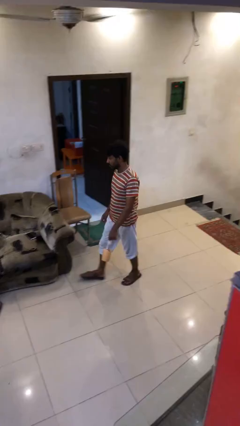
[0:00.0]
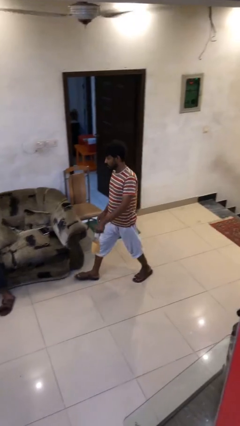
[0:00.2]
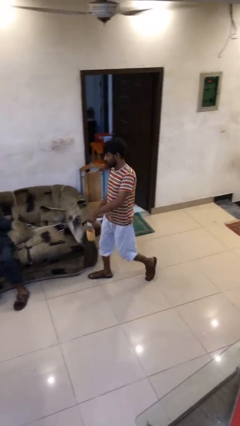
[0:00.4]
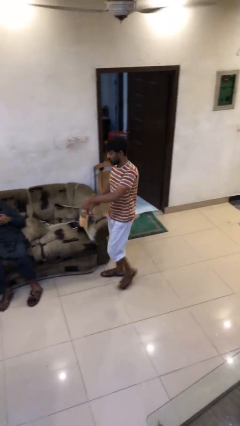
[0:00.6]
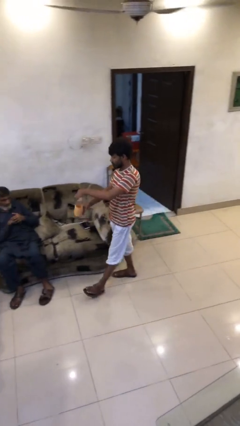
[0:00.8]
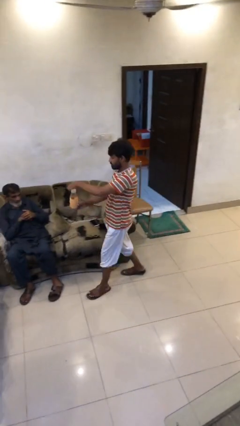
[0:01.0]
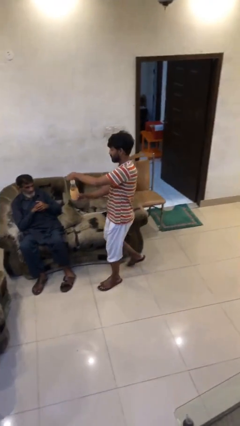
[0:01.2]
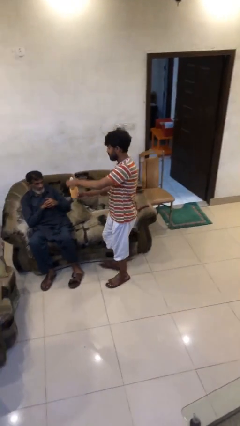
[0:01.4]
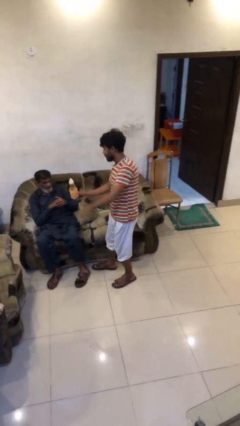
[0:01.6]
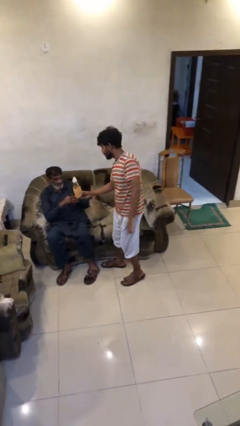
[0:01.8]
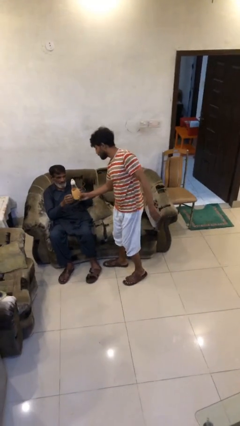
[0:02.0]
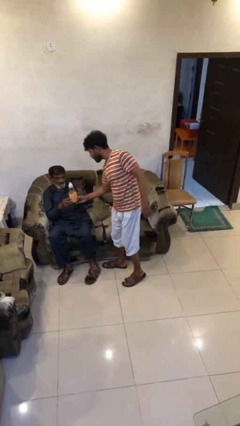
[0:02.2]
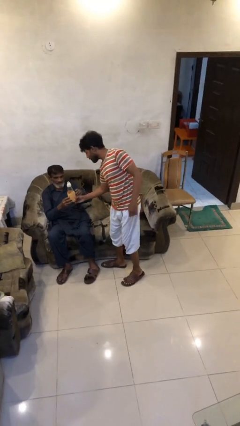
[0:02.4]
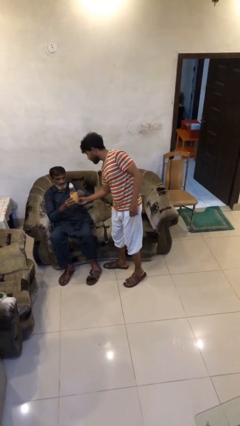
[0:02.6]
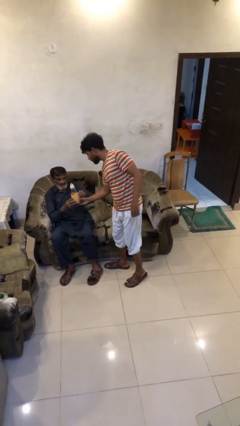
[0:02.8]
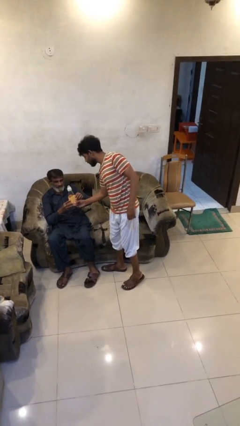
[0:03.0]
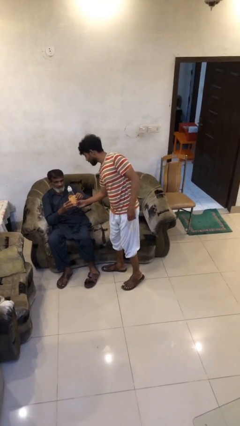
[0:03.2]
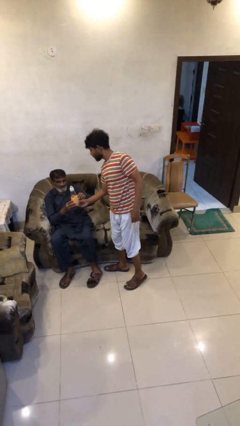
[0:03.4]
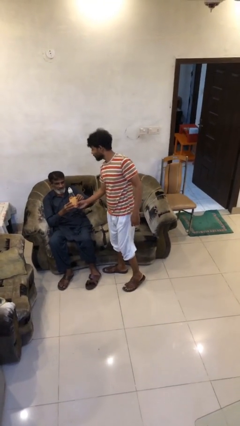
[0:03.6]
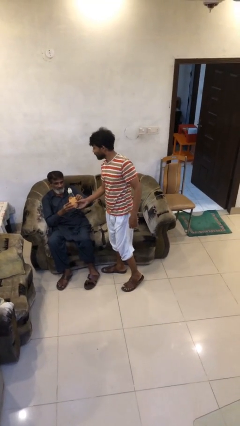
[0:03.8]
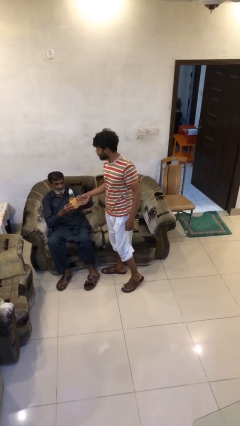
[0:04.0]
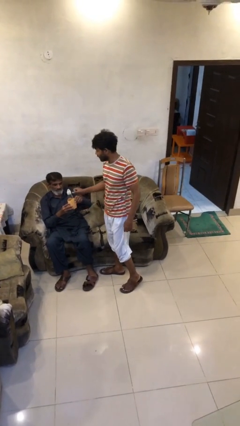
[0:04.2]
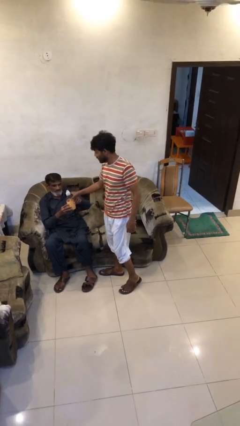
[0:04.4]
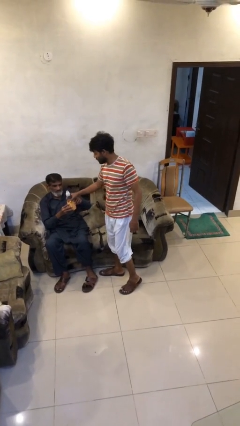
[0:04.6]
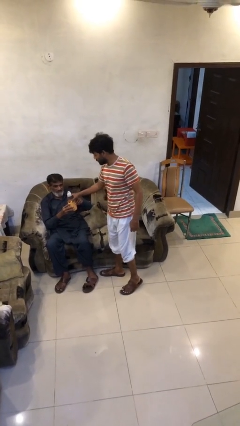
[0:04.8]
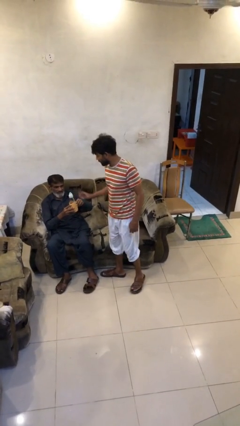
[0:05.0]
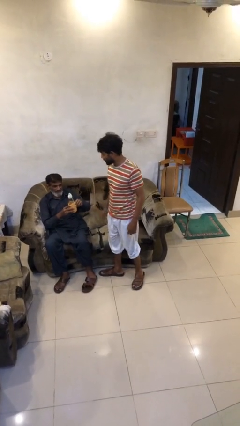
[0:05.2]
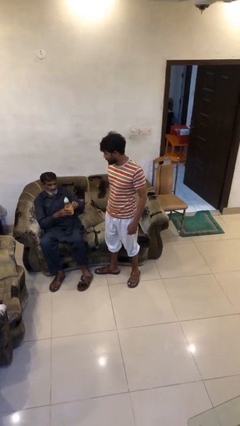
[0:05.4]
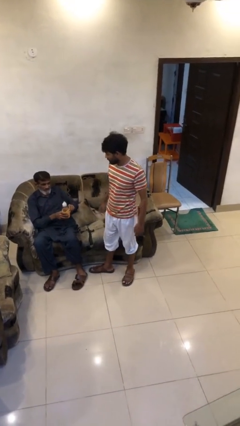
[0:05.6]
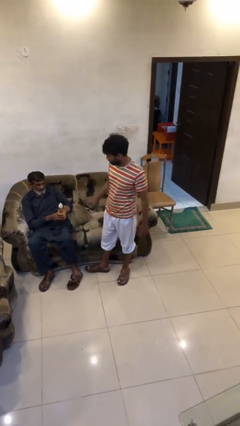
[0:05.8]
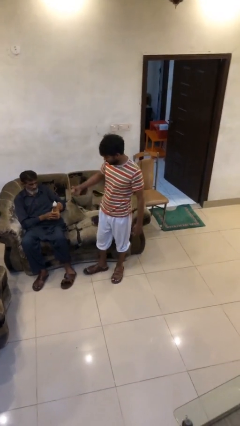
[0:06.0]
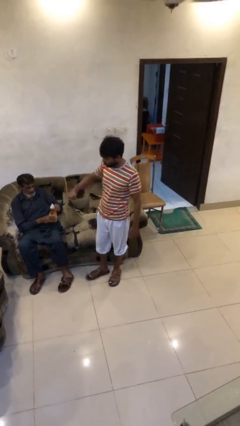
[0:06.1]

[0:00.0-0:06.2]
person transfers object to person

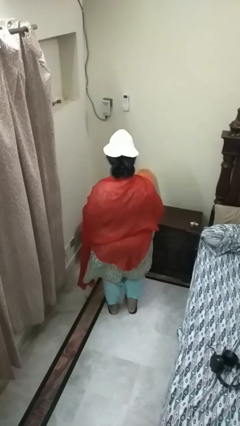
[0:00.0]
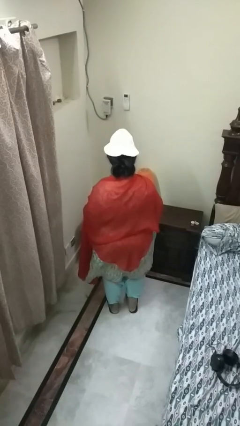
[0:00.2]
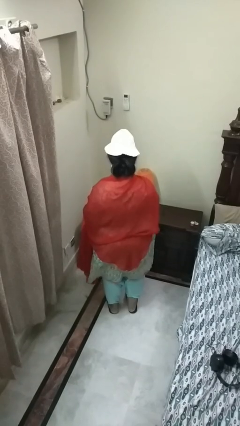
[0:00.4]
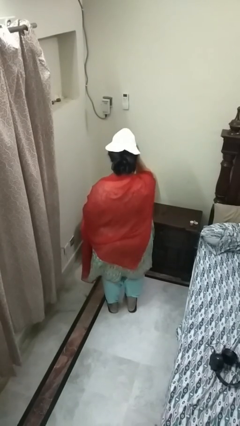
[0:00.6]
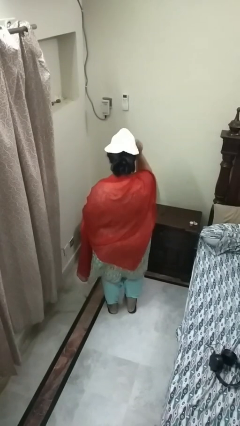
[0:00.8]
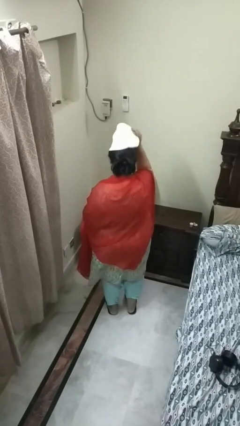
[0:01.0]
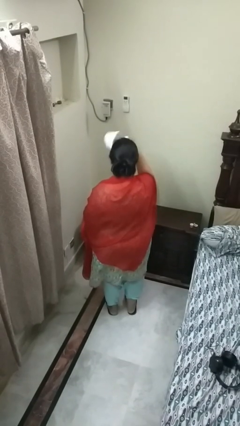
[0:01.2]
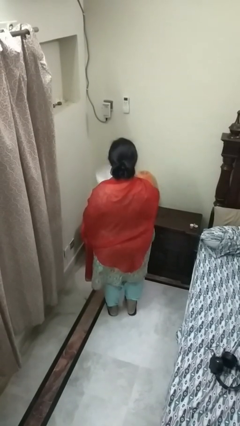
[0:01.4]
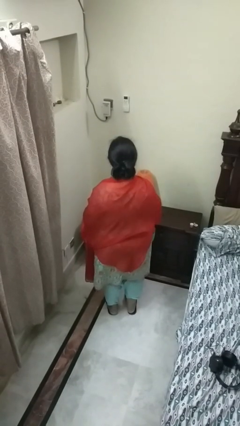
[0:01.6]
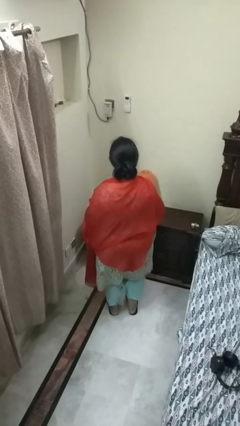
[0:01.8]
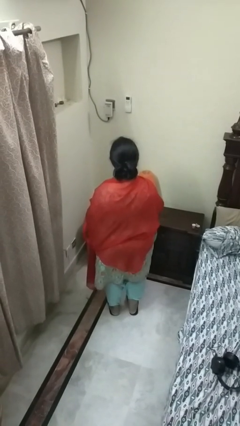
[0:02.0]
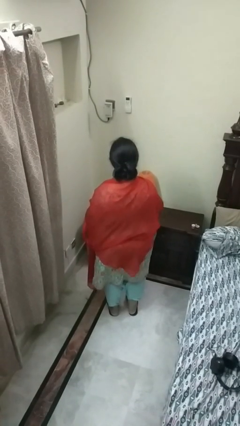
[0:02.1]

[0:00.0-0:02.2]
person takes off hat

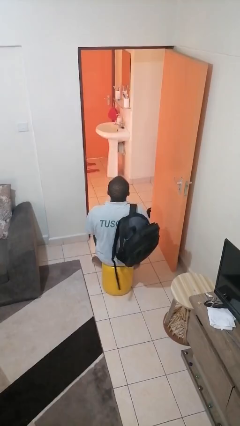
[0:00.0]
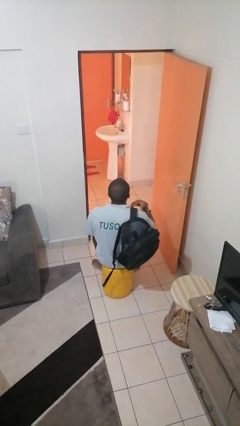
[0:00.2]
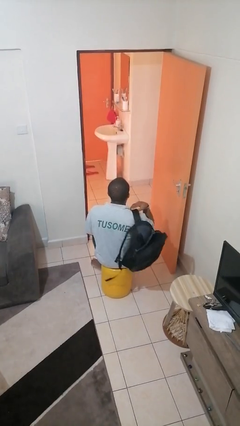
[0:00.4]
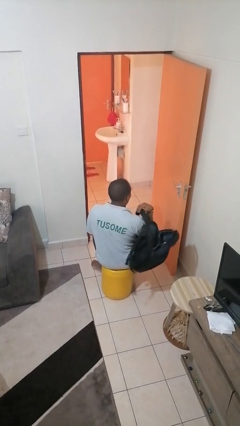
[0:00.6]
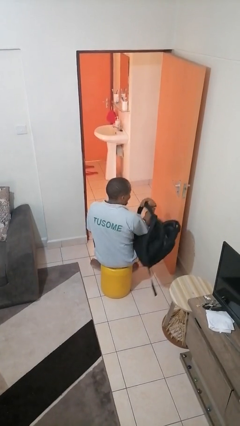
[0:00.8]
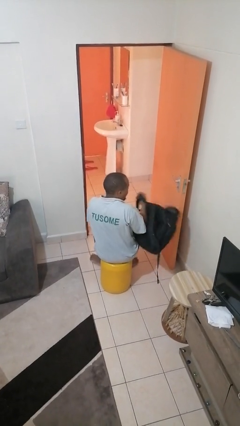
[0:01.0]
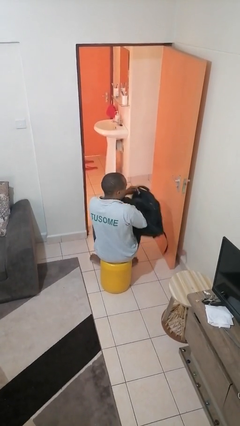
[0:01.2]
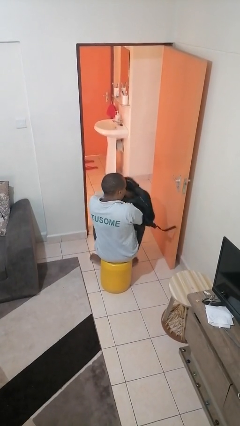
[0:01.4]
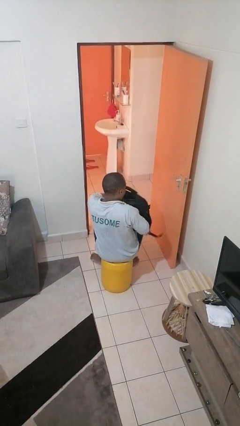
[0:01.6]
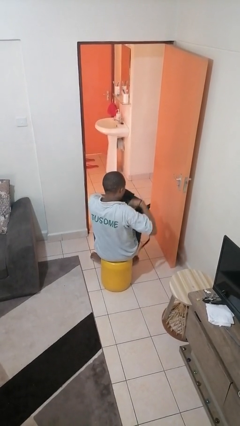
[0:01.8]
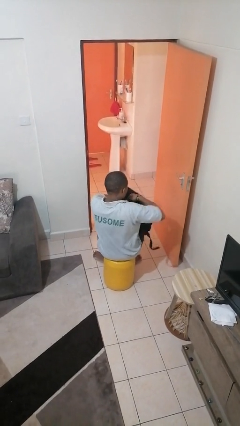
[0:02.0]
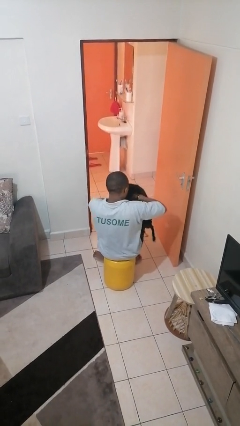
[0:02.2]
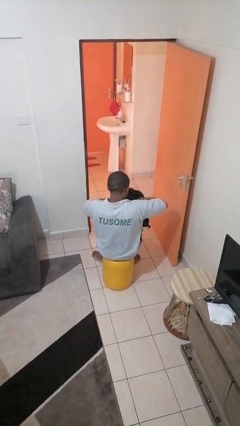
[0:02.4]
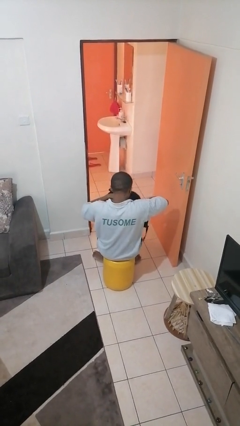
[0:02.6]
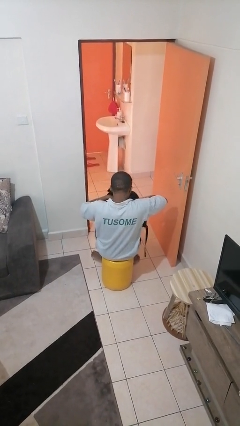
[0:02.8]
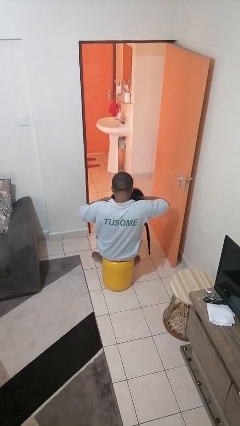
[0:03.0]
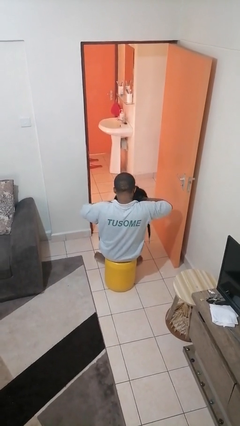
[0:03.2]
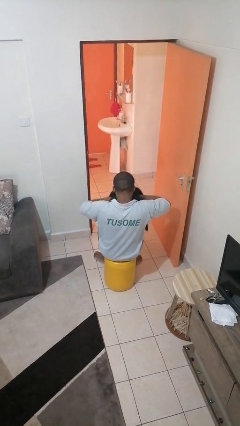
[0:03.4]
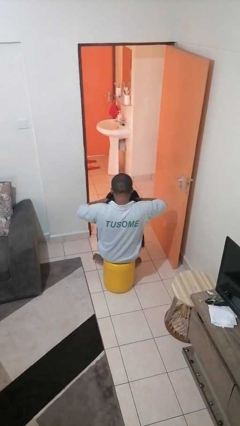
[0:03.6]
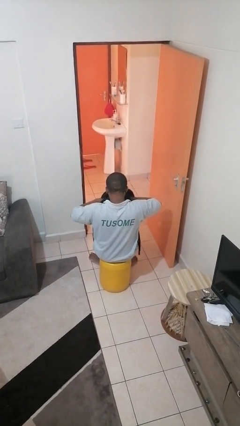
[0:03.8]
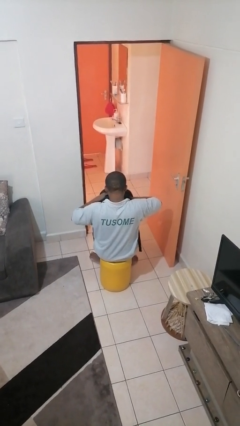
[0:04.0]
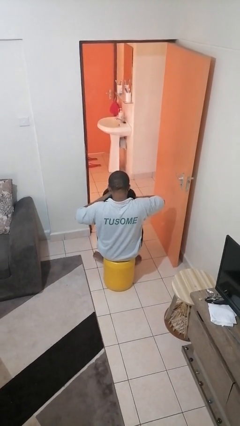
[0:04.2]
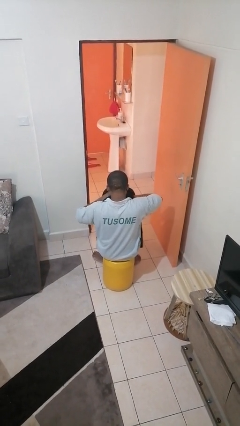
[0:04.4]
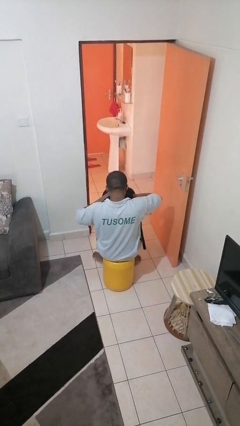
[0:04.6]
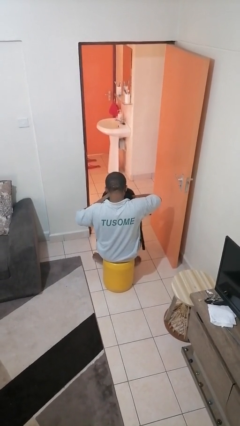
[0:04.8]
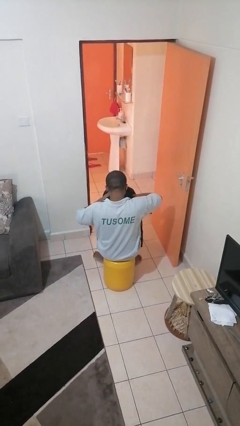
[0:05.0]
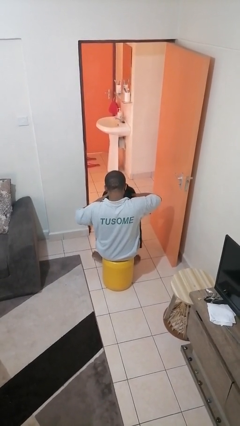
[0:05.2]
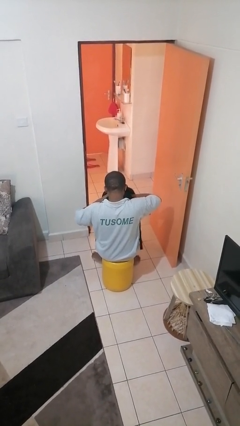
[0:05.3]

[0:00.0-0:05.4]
person searches in backpack

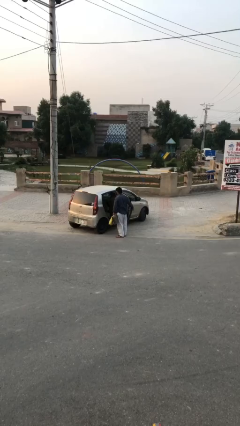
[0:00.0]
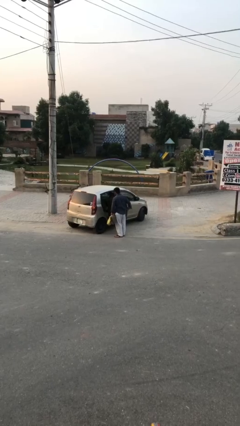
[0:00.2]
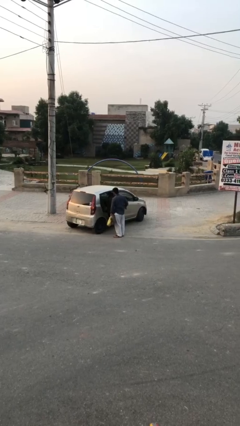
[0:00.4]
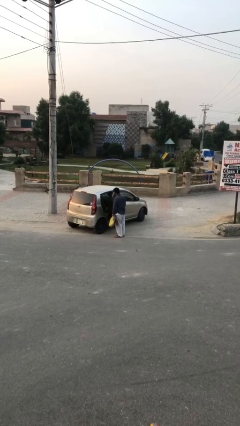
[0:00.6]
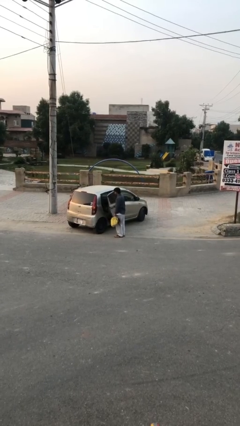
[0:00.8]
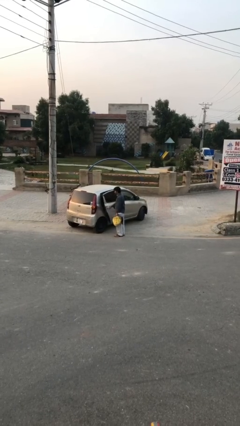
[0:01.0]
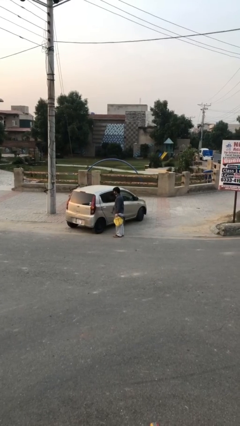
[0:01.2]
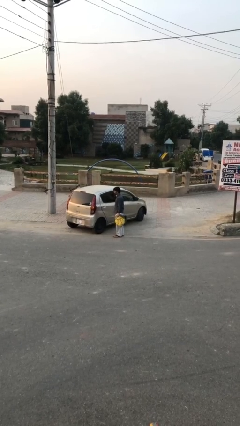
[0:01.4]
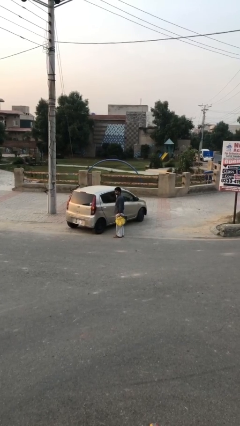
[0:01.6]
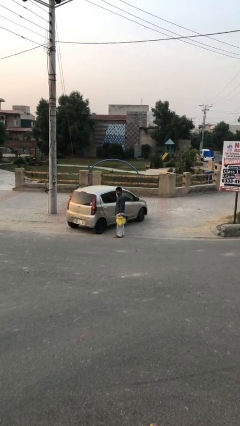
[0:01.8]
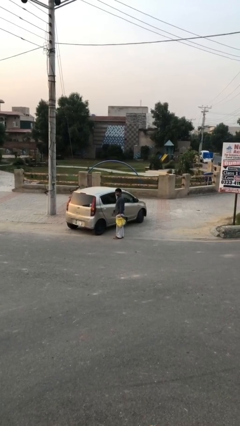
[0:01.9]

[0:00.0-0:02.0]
person closes car door

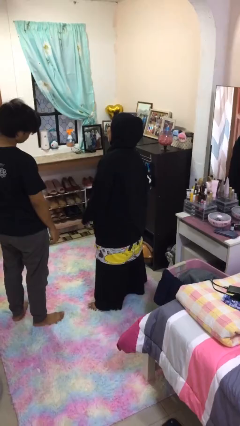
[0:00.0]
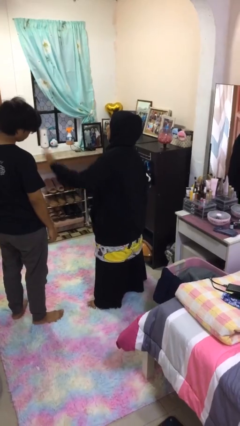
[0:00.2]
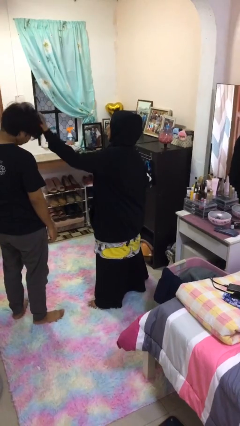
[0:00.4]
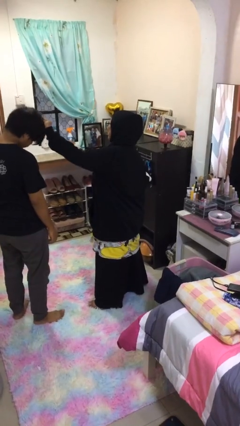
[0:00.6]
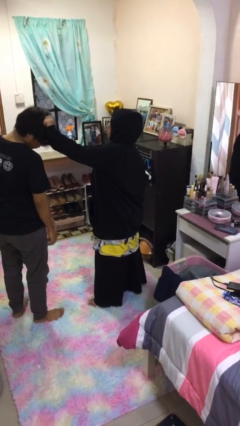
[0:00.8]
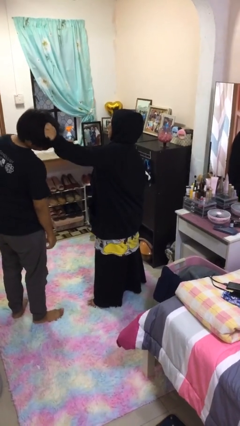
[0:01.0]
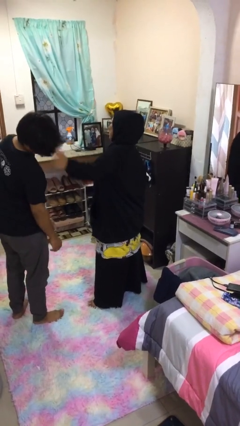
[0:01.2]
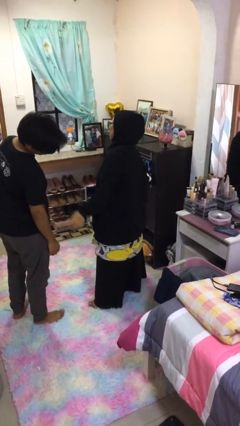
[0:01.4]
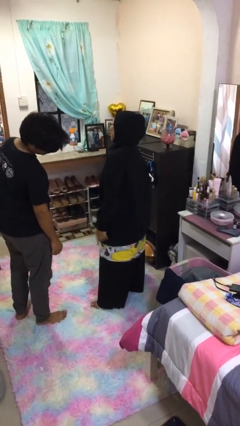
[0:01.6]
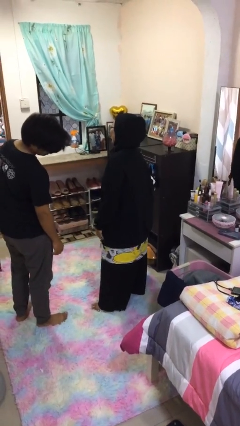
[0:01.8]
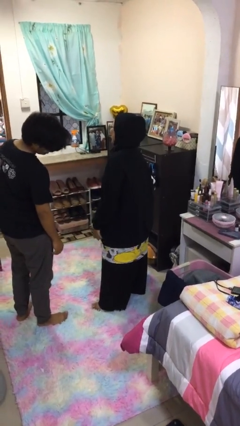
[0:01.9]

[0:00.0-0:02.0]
person grabs person by hair
